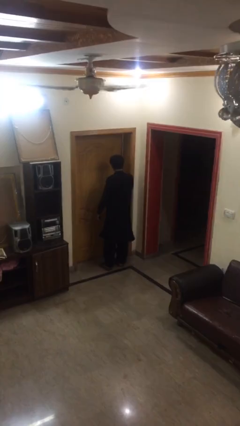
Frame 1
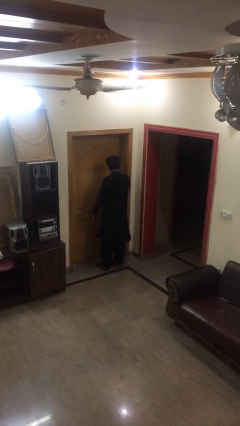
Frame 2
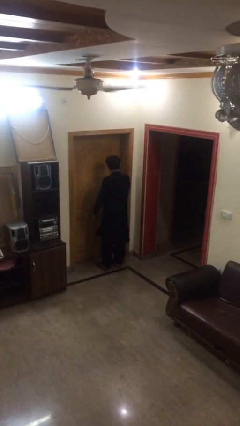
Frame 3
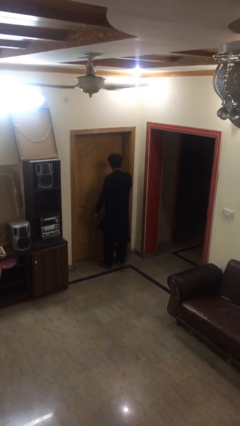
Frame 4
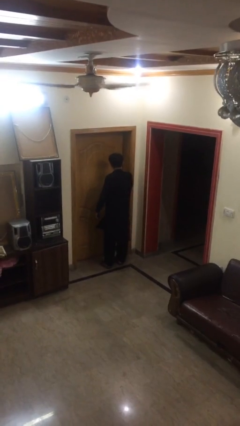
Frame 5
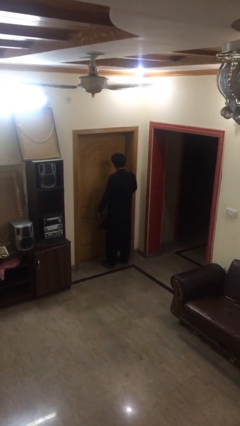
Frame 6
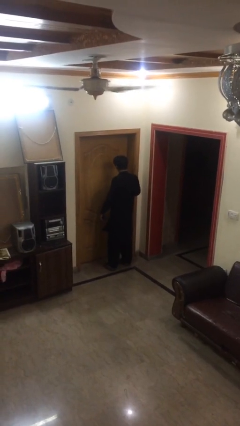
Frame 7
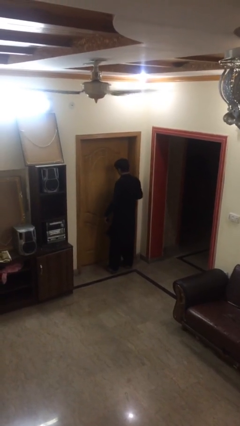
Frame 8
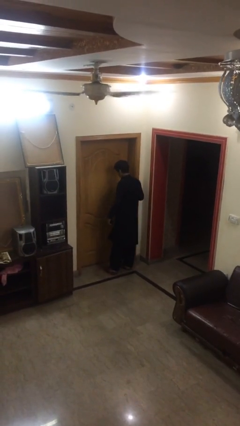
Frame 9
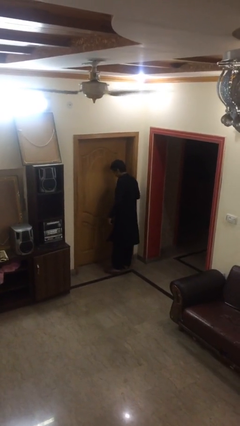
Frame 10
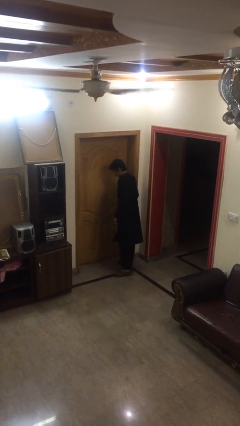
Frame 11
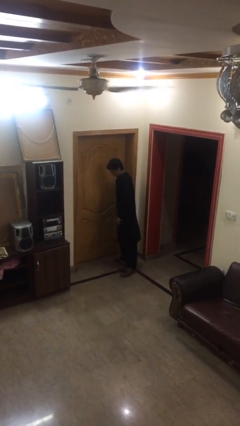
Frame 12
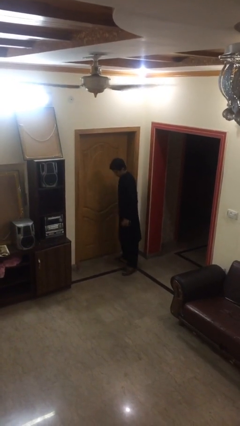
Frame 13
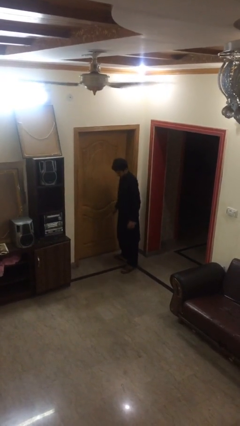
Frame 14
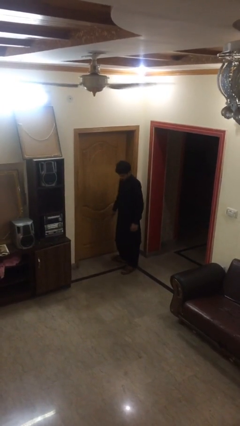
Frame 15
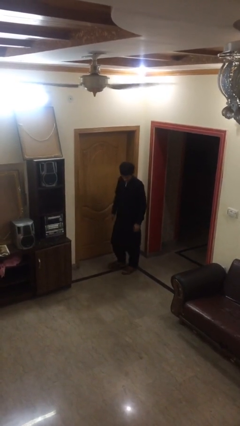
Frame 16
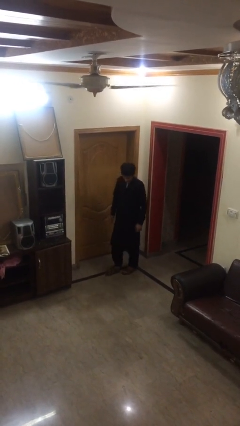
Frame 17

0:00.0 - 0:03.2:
person closes facility door

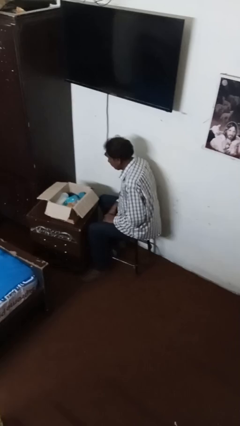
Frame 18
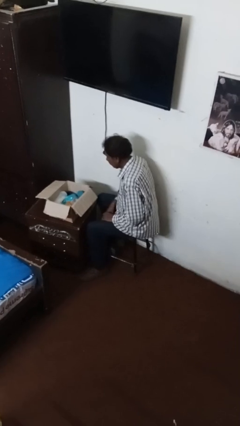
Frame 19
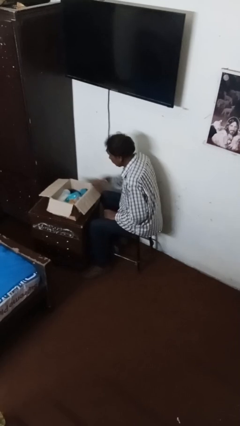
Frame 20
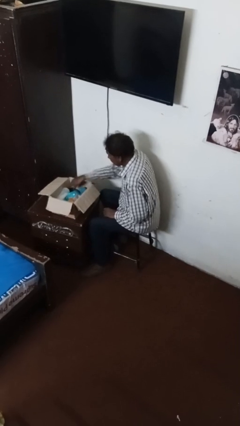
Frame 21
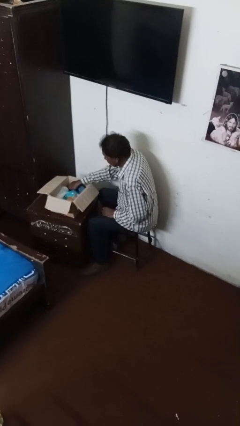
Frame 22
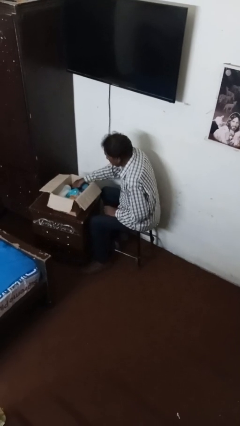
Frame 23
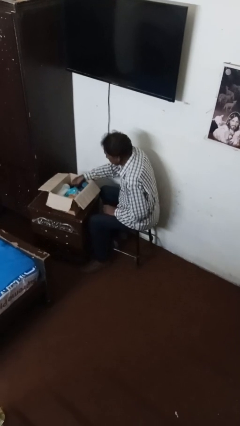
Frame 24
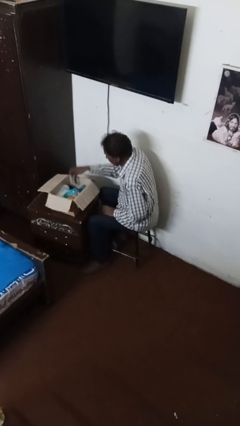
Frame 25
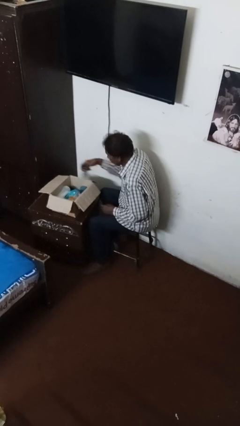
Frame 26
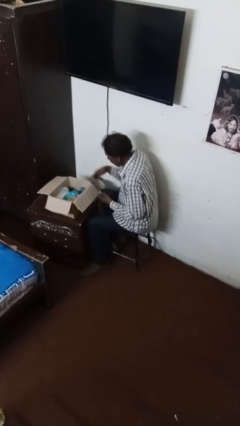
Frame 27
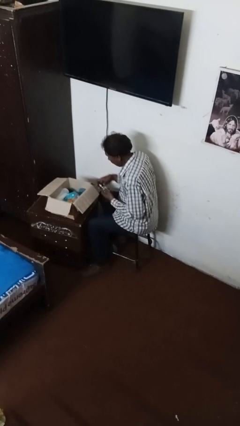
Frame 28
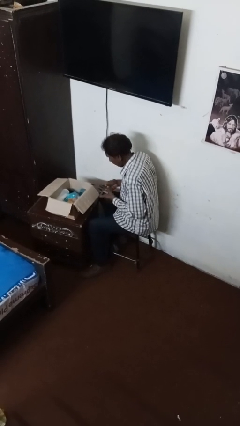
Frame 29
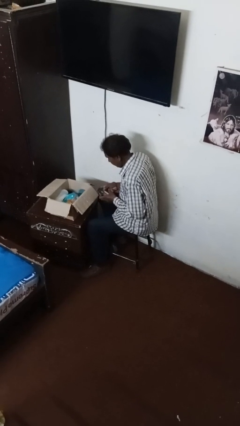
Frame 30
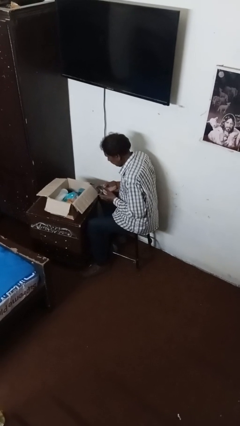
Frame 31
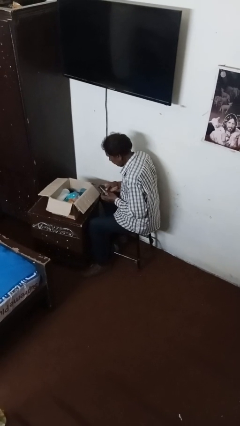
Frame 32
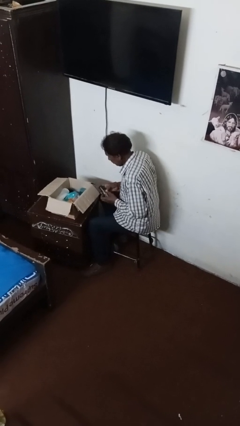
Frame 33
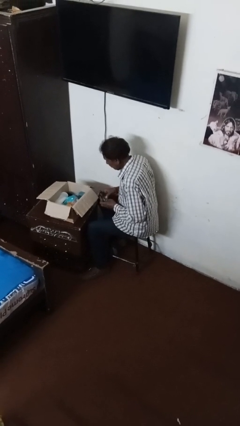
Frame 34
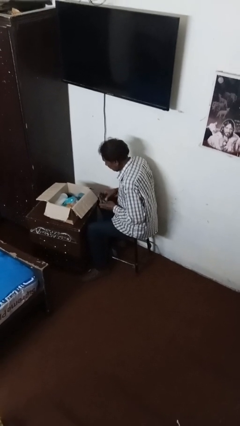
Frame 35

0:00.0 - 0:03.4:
person searches in box

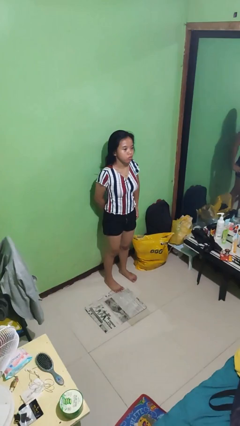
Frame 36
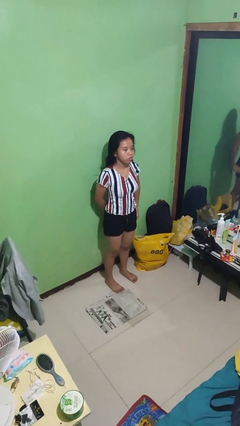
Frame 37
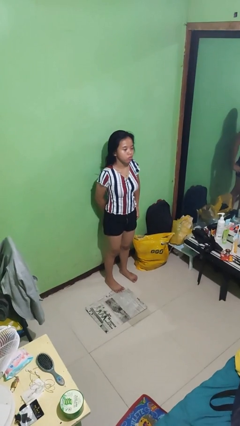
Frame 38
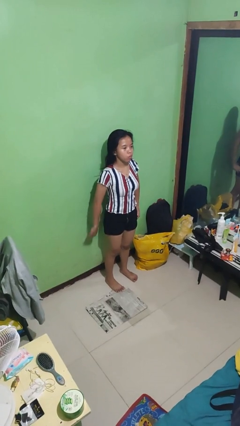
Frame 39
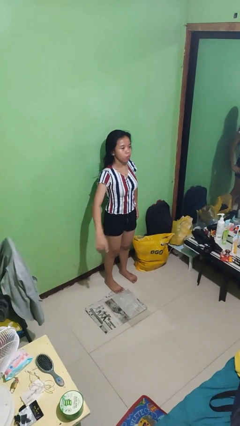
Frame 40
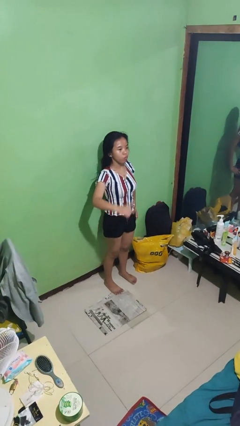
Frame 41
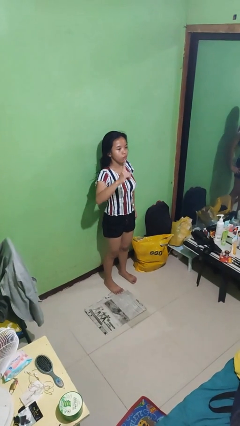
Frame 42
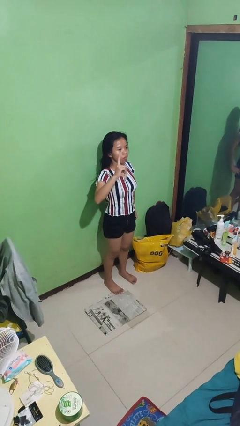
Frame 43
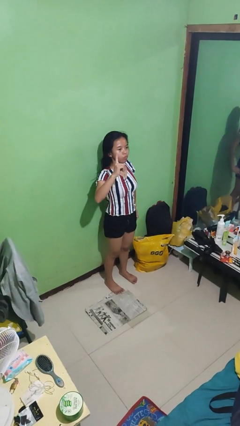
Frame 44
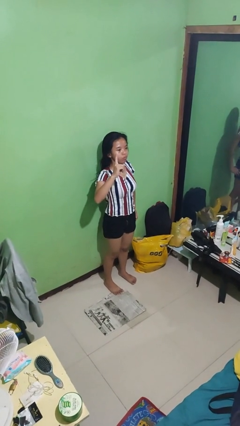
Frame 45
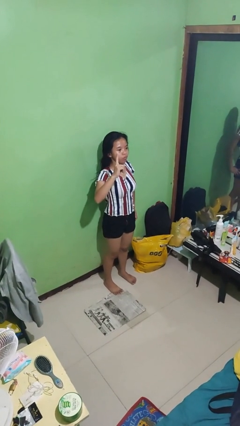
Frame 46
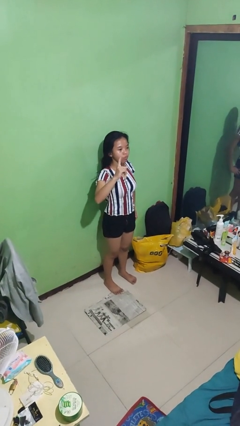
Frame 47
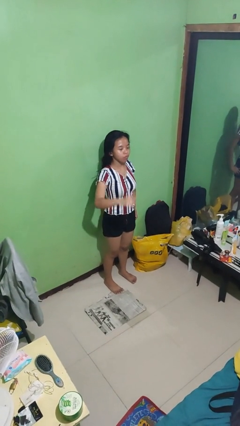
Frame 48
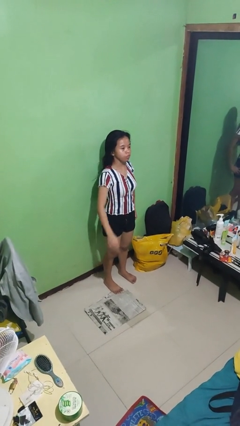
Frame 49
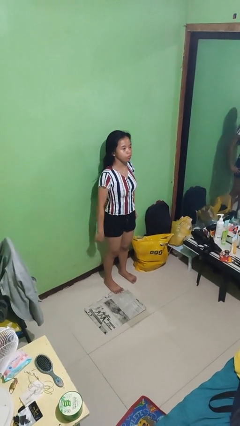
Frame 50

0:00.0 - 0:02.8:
person gestures number one

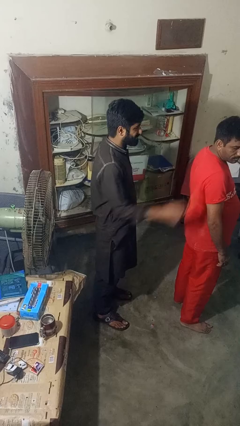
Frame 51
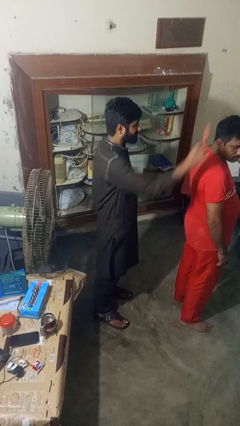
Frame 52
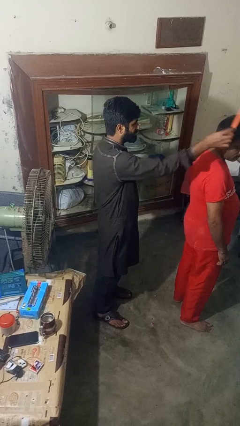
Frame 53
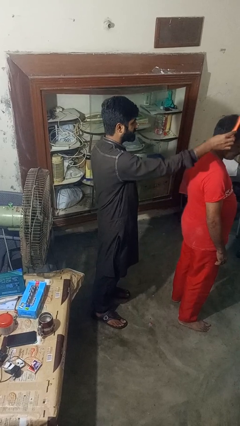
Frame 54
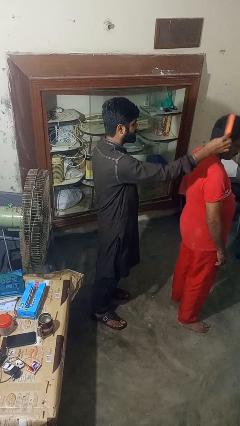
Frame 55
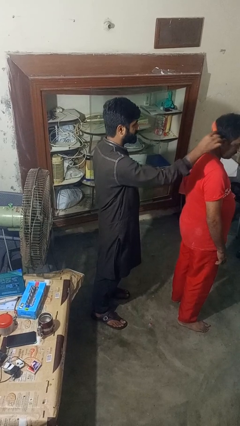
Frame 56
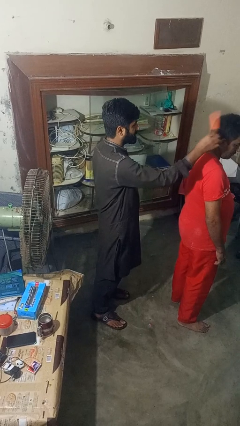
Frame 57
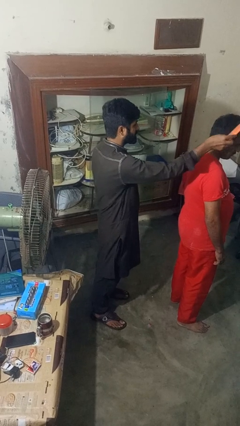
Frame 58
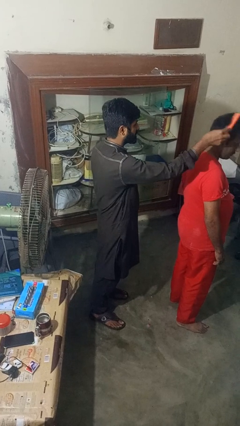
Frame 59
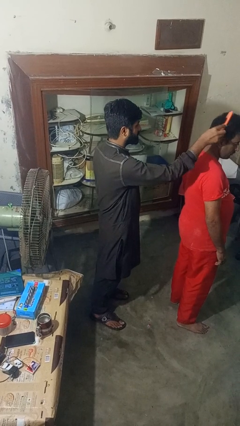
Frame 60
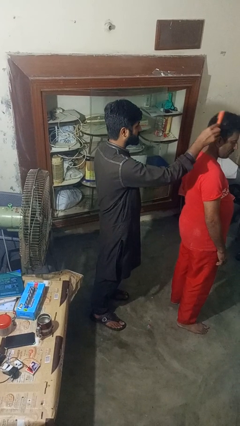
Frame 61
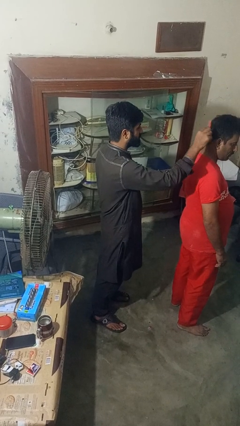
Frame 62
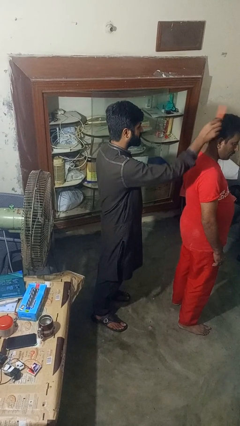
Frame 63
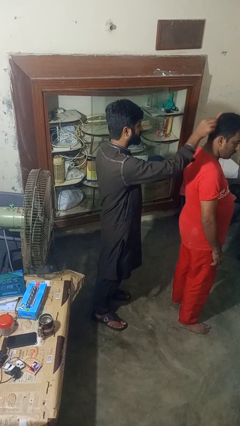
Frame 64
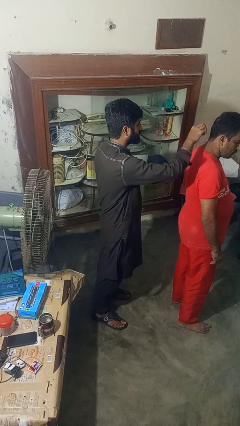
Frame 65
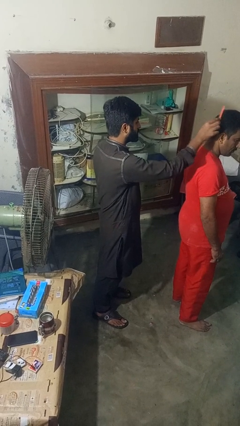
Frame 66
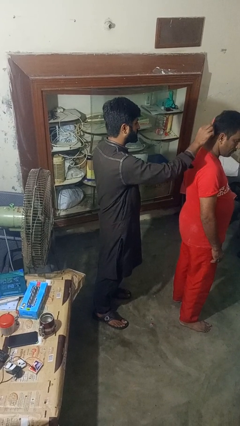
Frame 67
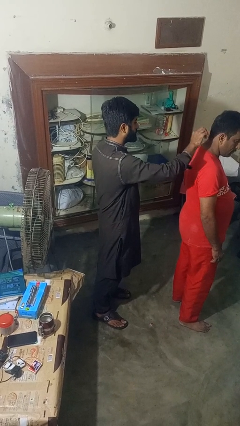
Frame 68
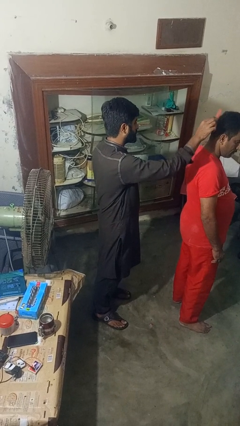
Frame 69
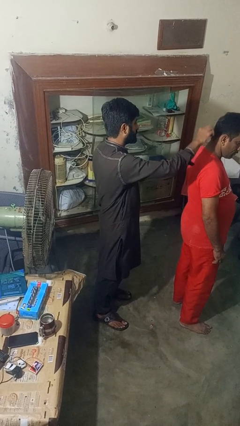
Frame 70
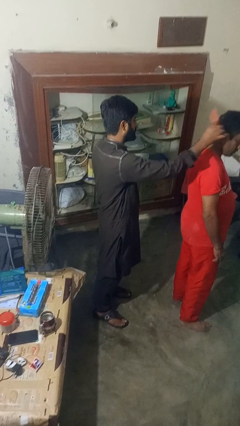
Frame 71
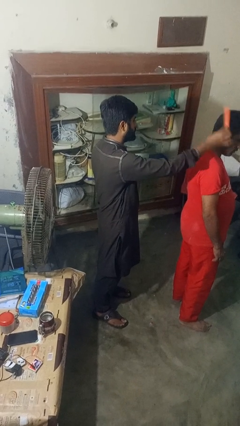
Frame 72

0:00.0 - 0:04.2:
person brushes hair of person

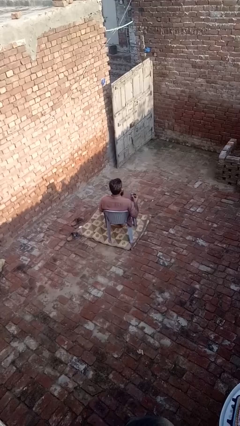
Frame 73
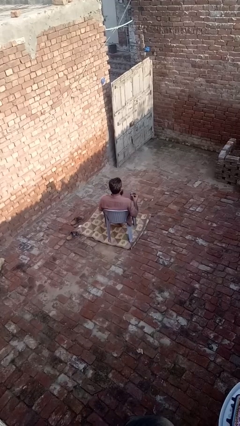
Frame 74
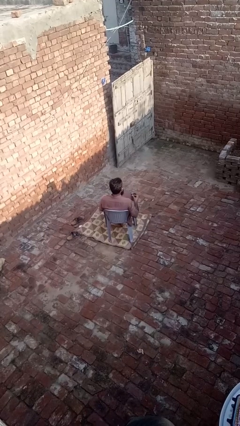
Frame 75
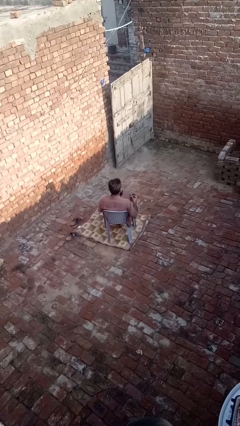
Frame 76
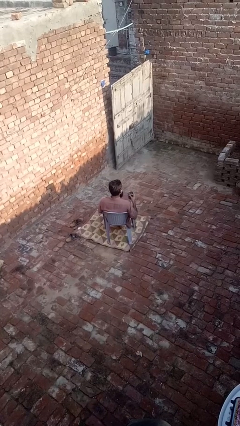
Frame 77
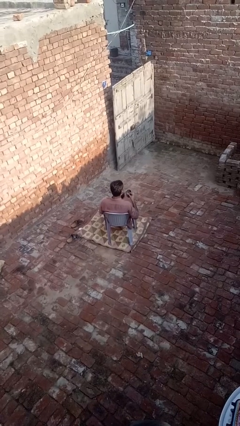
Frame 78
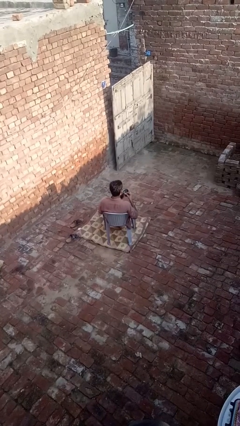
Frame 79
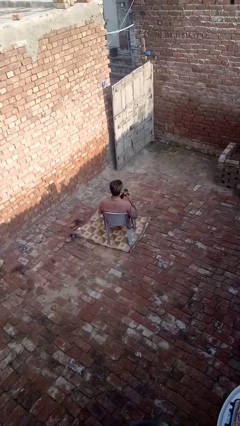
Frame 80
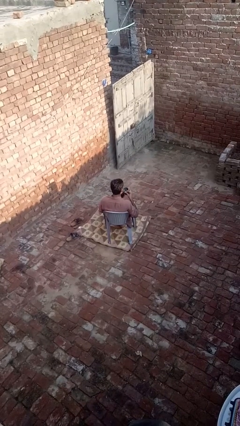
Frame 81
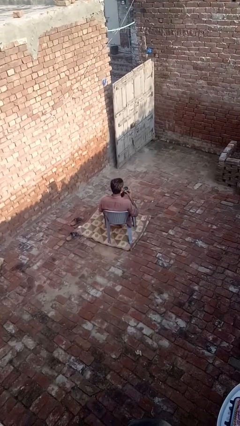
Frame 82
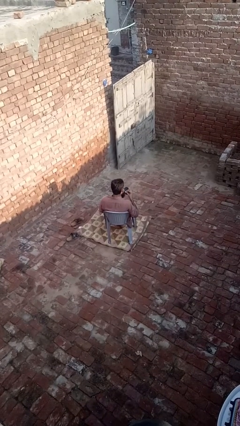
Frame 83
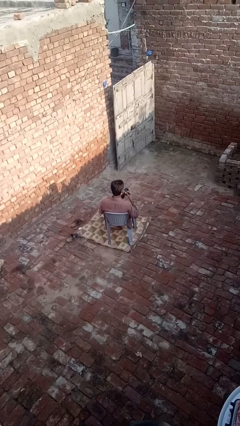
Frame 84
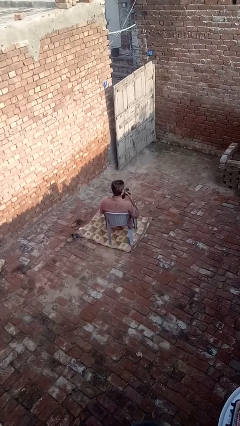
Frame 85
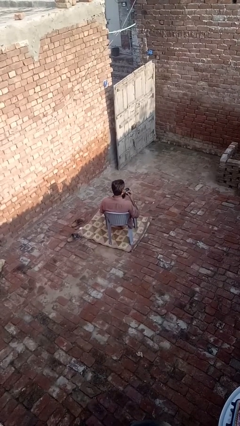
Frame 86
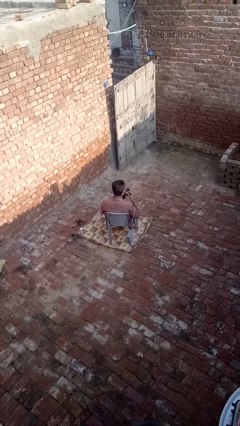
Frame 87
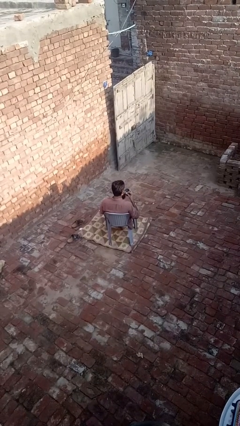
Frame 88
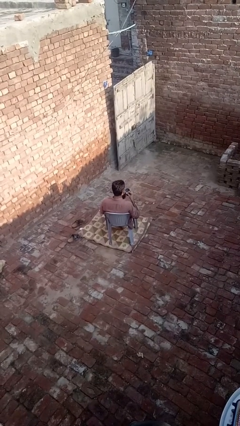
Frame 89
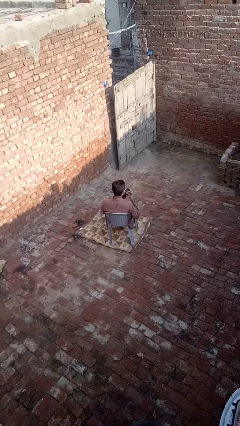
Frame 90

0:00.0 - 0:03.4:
person drinks from straw

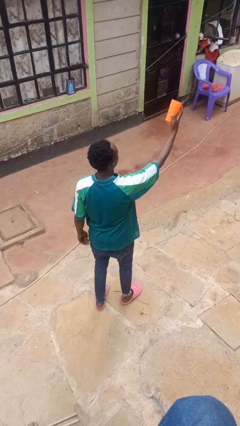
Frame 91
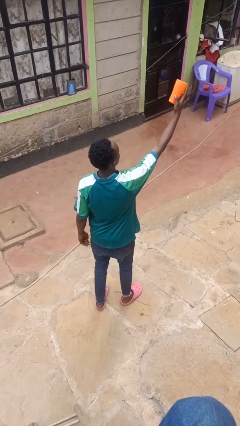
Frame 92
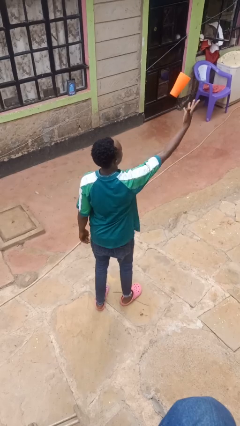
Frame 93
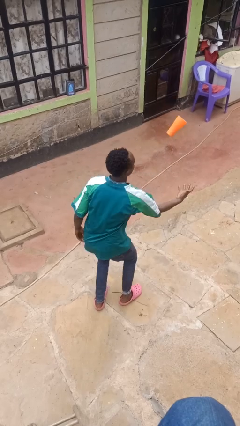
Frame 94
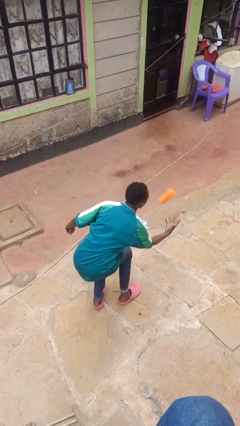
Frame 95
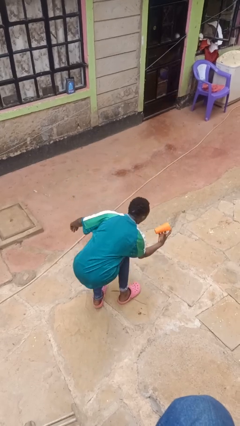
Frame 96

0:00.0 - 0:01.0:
person drops object
